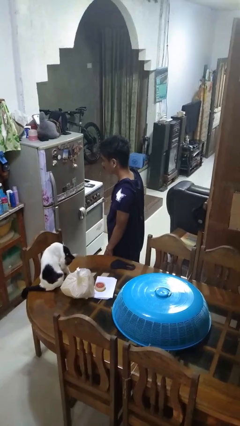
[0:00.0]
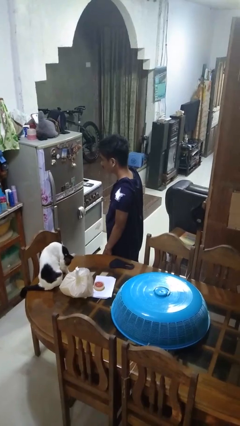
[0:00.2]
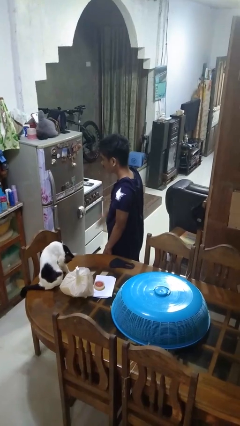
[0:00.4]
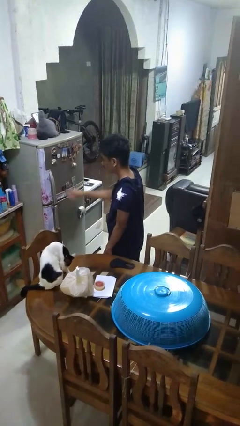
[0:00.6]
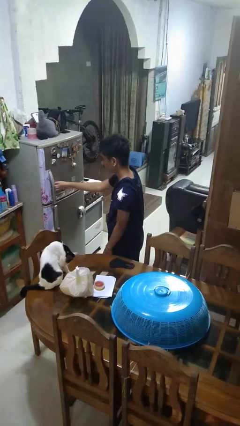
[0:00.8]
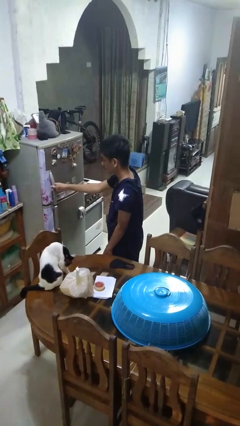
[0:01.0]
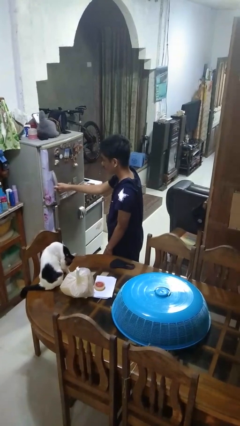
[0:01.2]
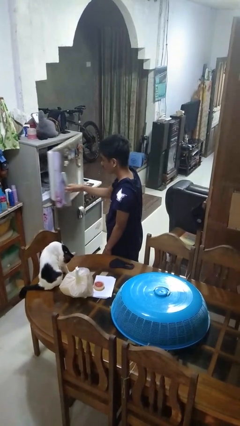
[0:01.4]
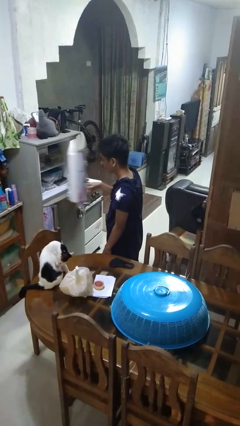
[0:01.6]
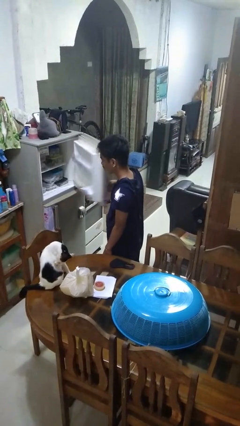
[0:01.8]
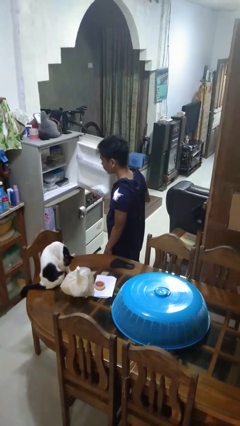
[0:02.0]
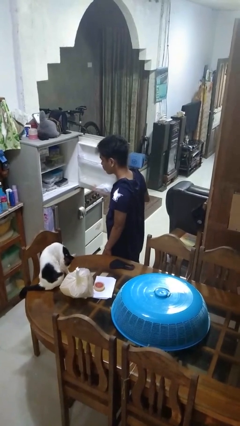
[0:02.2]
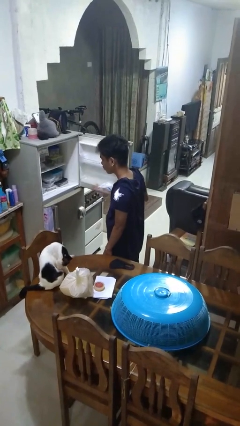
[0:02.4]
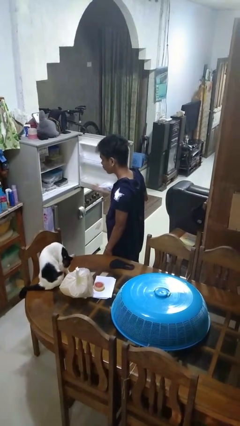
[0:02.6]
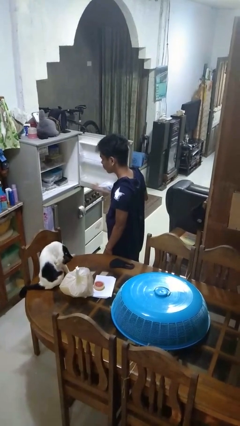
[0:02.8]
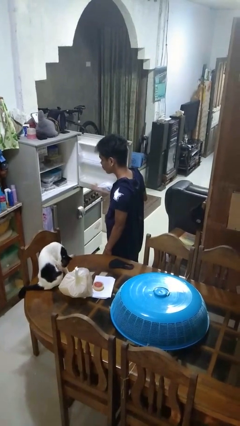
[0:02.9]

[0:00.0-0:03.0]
person opens refrigerator

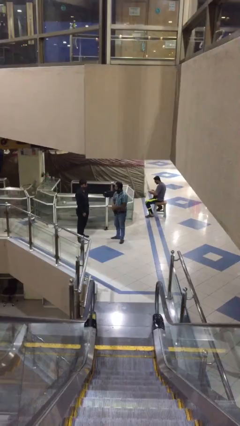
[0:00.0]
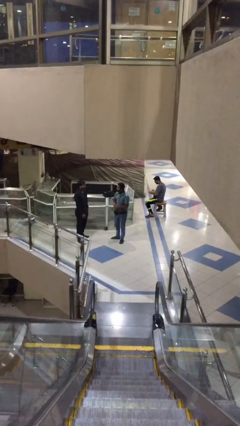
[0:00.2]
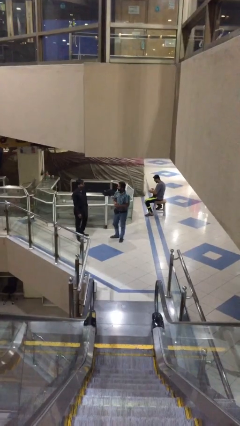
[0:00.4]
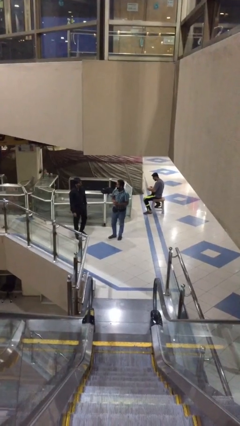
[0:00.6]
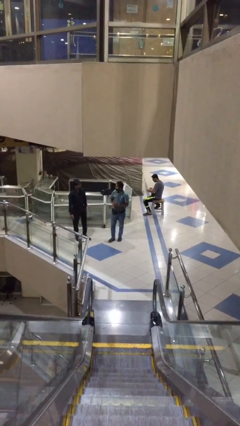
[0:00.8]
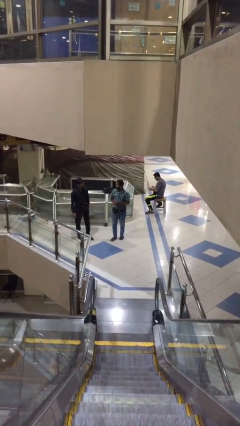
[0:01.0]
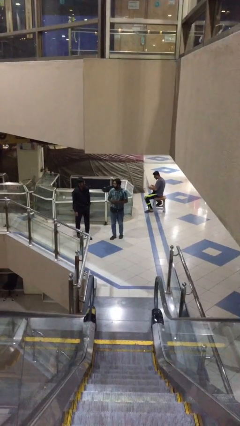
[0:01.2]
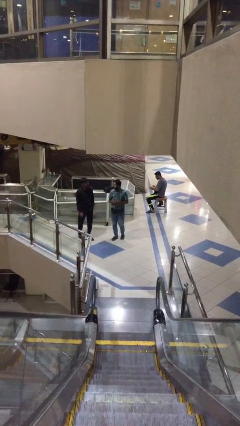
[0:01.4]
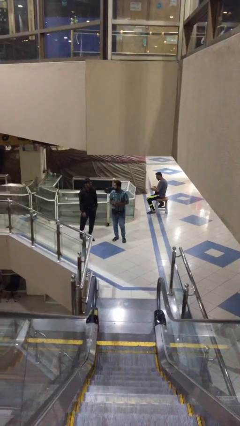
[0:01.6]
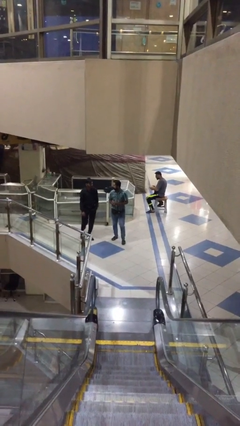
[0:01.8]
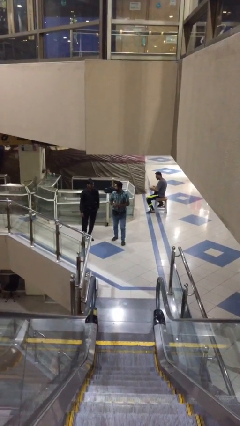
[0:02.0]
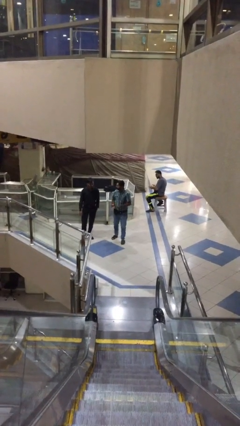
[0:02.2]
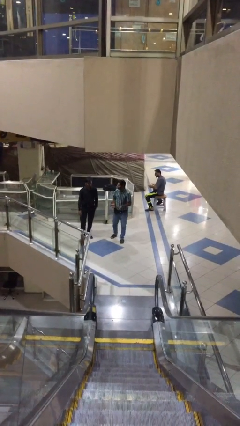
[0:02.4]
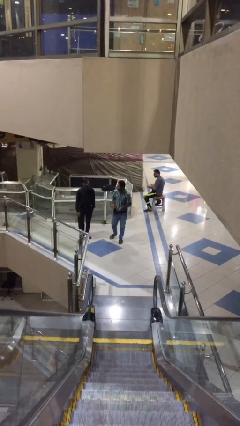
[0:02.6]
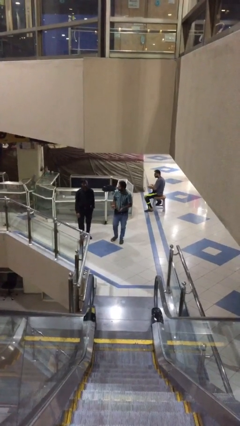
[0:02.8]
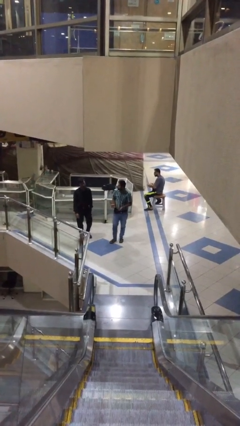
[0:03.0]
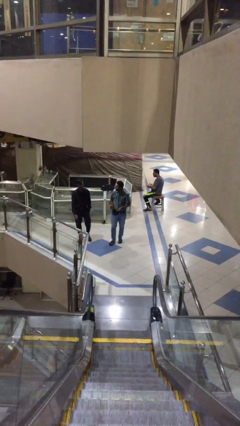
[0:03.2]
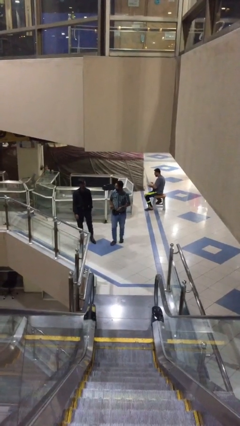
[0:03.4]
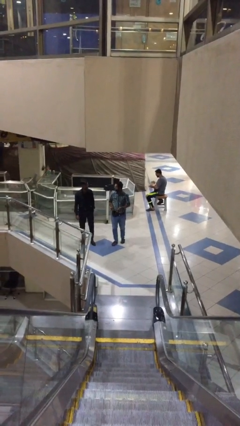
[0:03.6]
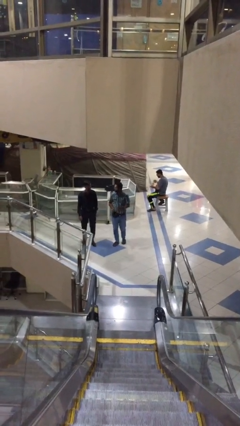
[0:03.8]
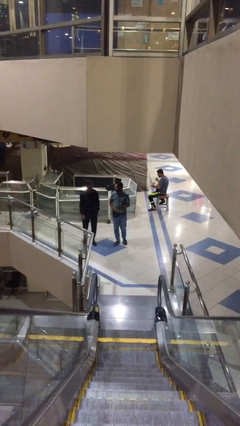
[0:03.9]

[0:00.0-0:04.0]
person talks to person

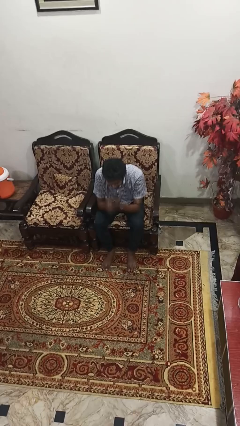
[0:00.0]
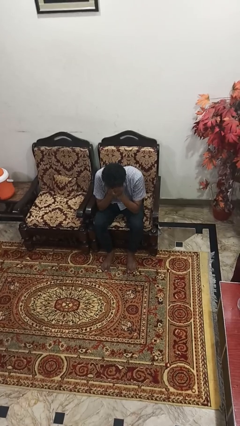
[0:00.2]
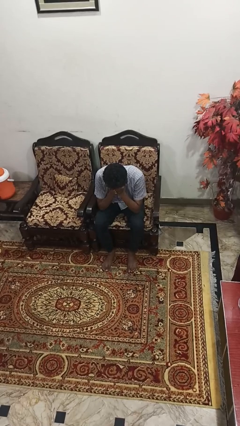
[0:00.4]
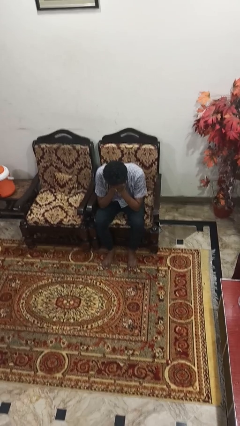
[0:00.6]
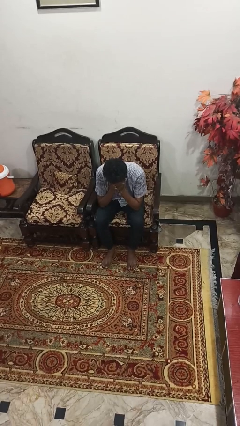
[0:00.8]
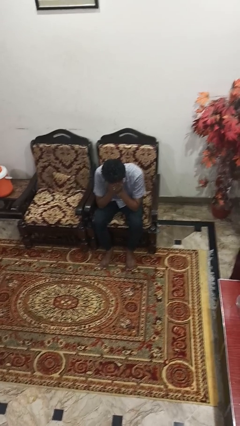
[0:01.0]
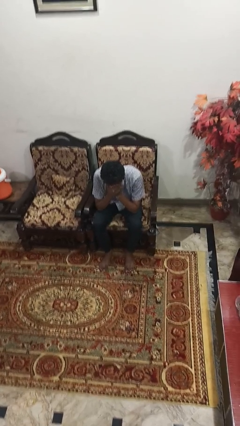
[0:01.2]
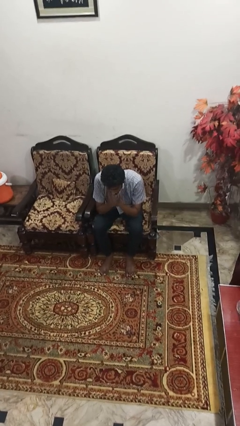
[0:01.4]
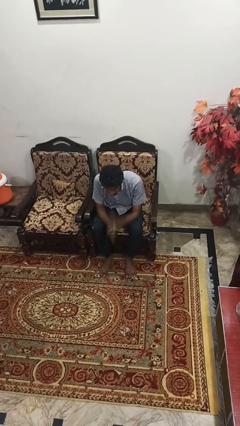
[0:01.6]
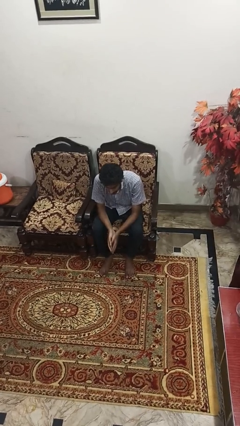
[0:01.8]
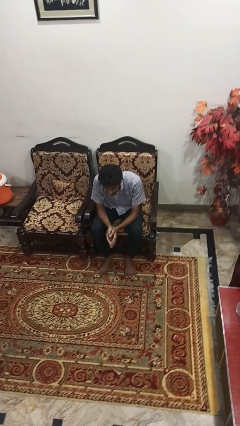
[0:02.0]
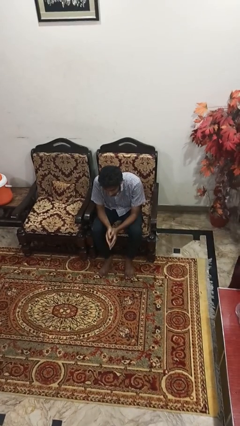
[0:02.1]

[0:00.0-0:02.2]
person covers face with hands

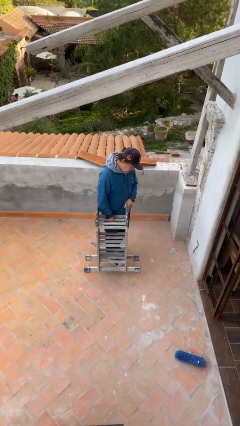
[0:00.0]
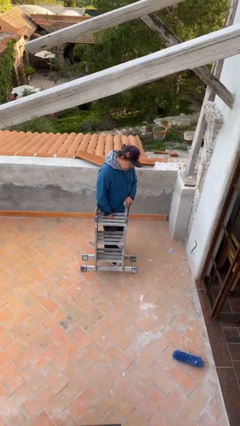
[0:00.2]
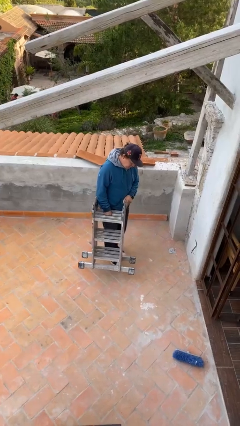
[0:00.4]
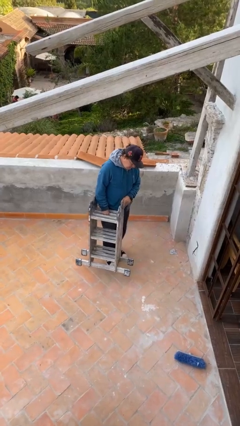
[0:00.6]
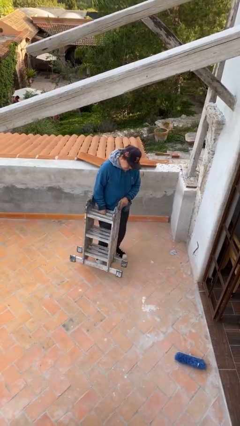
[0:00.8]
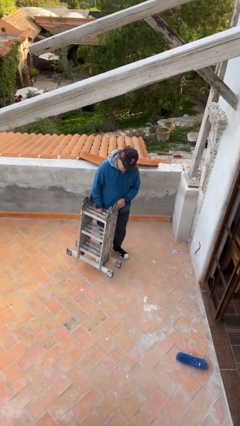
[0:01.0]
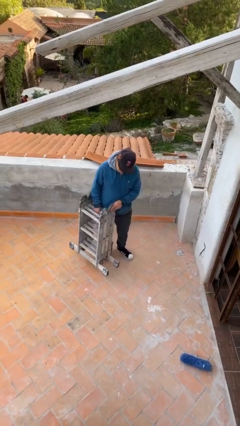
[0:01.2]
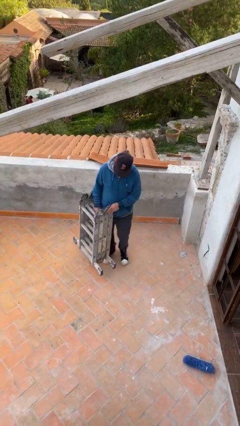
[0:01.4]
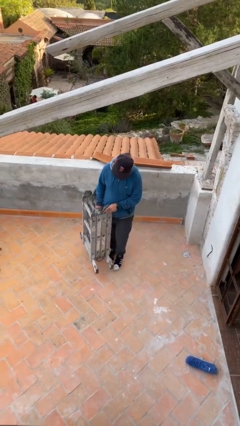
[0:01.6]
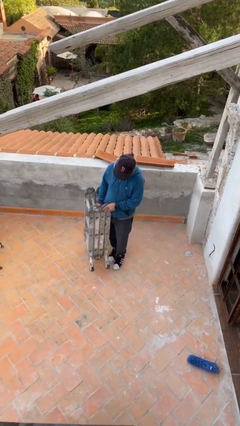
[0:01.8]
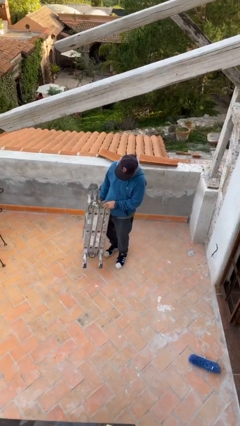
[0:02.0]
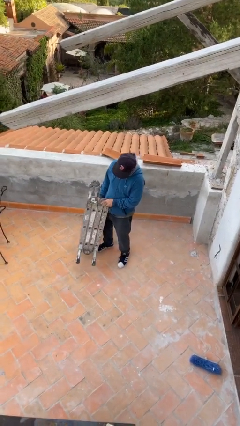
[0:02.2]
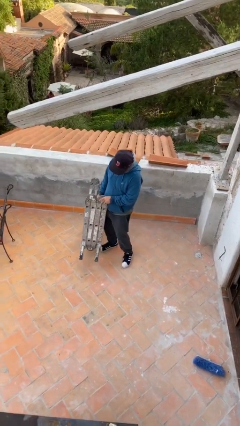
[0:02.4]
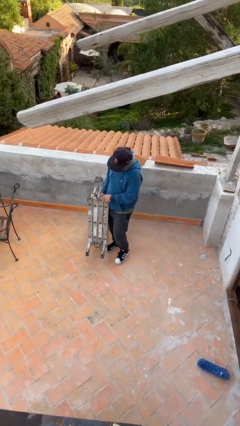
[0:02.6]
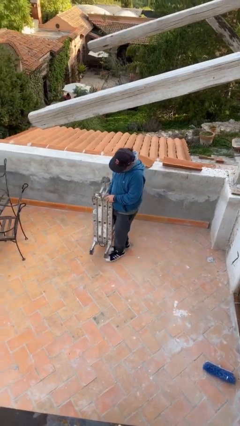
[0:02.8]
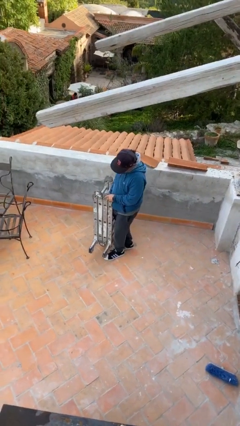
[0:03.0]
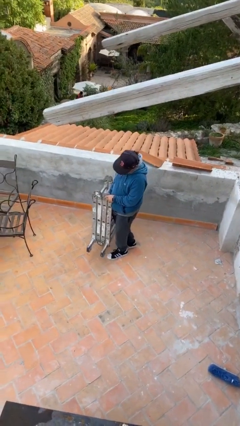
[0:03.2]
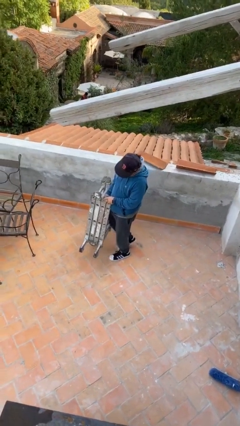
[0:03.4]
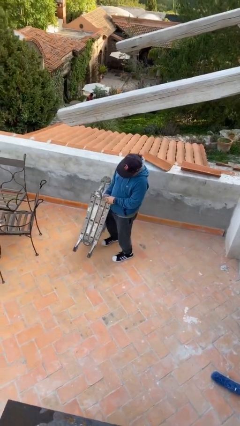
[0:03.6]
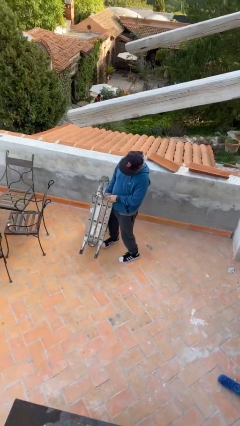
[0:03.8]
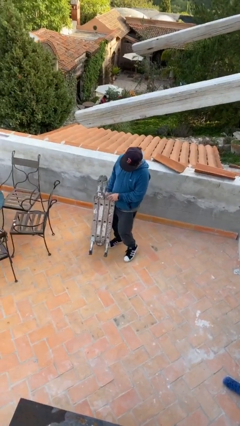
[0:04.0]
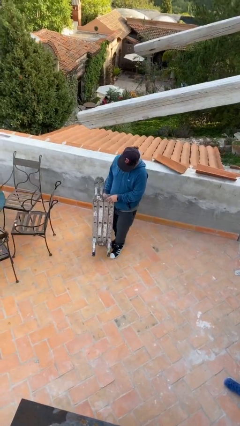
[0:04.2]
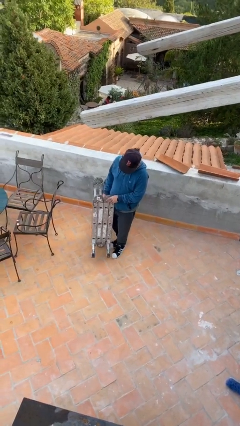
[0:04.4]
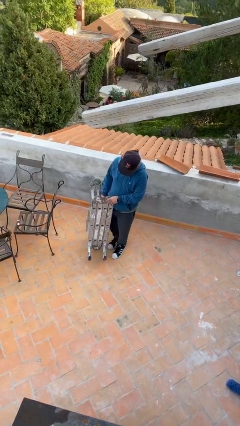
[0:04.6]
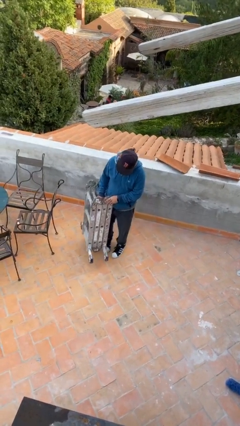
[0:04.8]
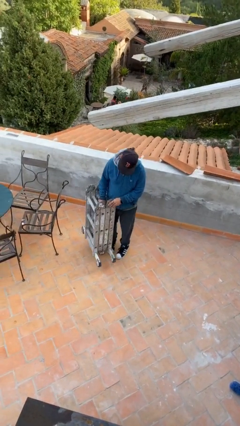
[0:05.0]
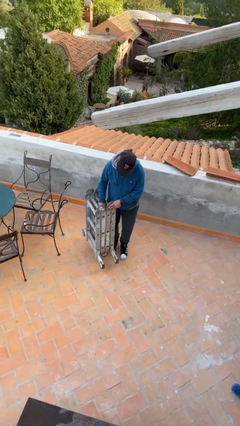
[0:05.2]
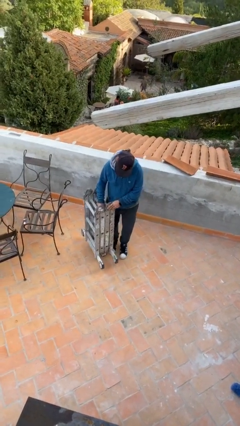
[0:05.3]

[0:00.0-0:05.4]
person carries heavy object

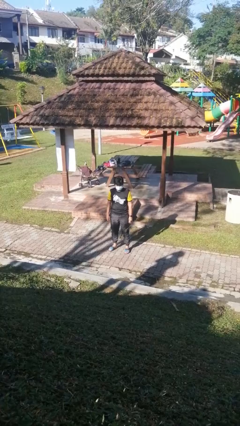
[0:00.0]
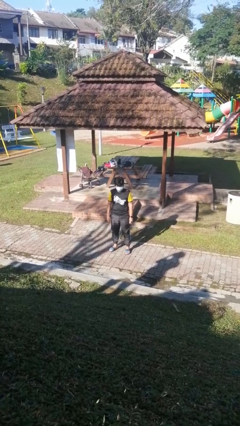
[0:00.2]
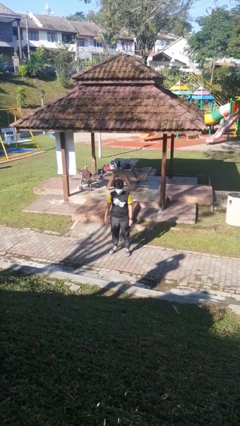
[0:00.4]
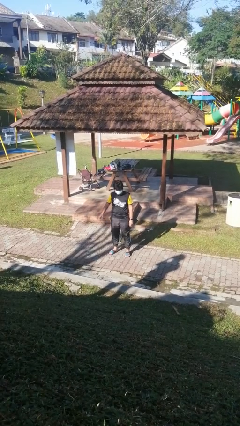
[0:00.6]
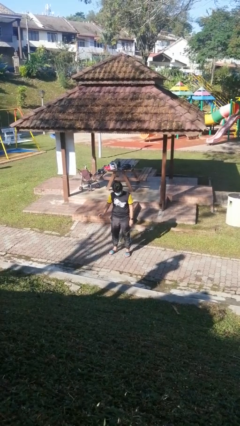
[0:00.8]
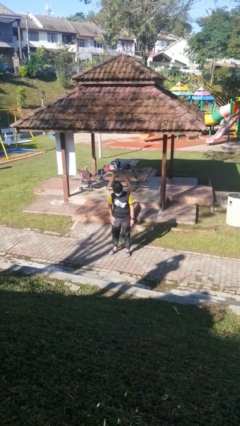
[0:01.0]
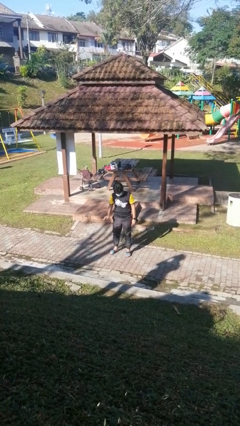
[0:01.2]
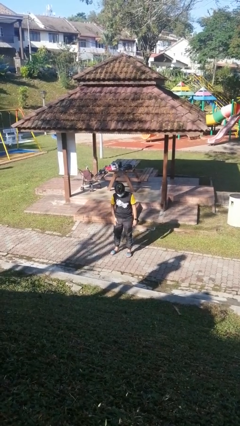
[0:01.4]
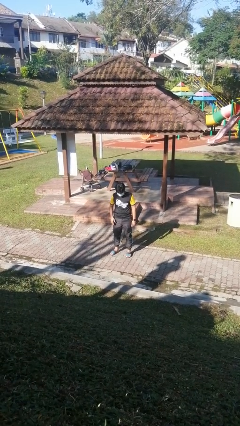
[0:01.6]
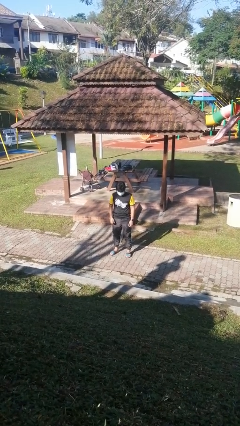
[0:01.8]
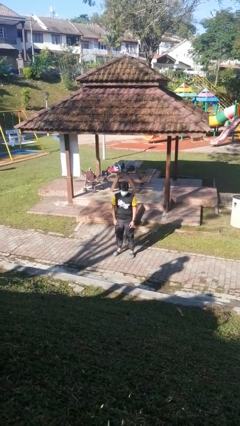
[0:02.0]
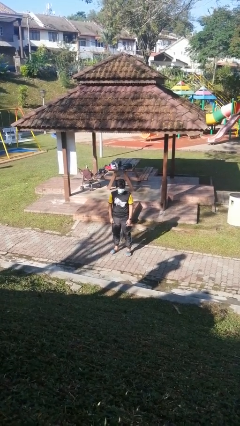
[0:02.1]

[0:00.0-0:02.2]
person slaps hands on thighs

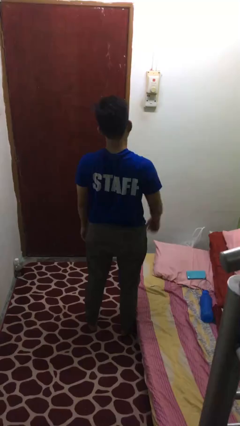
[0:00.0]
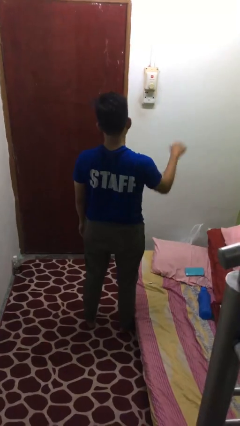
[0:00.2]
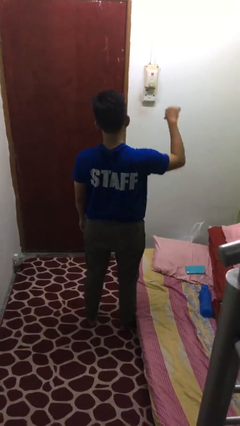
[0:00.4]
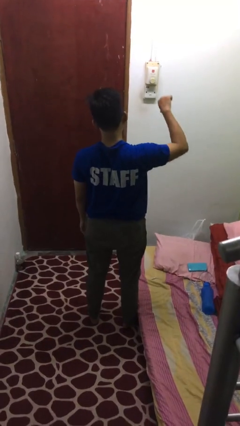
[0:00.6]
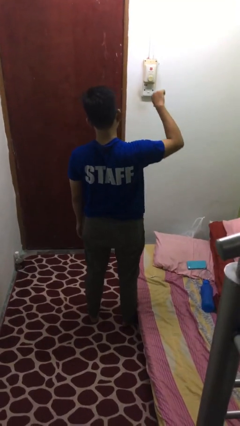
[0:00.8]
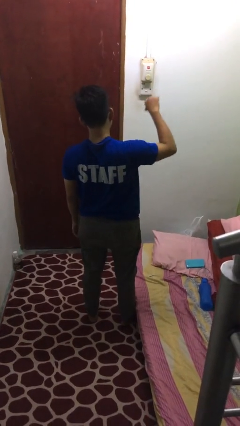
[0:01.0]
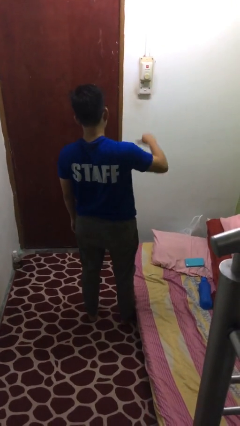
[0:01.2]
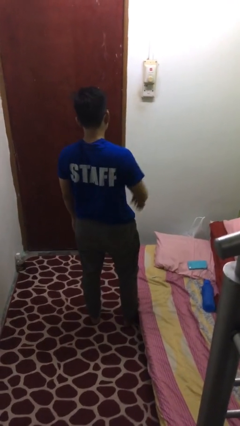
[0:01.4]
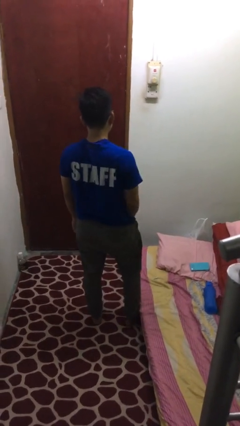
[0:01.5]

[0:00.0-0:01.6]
person gestures thumbs down
